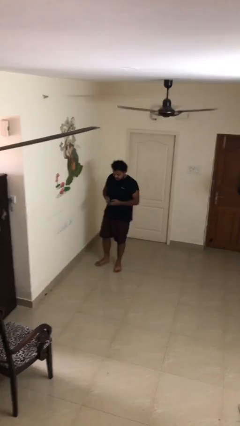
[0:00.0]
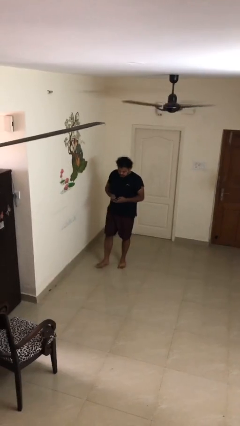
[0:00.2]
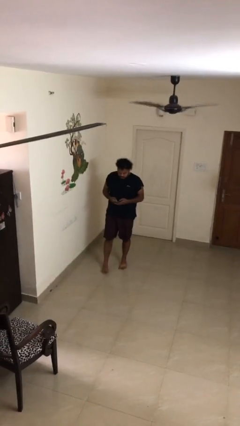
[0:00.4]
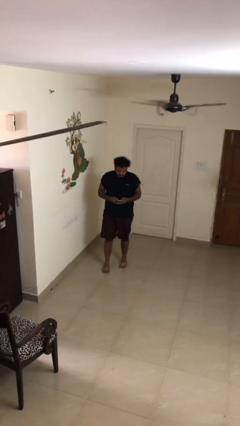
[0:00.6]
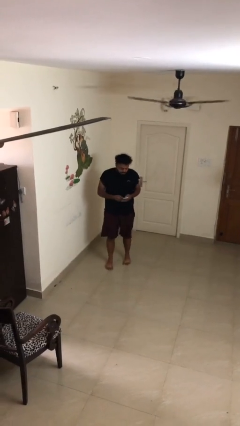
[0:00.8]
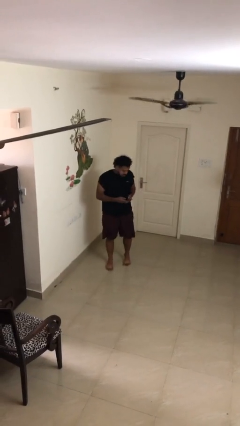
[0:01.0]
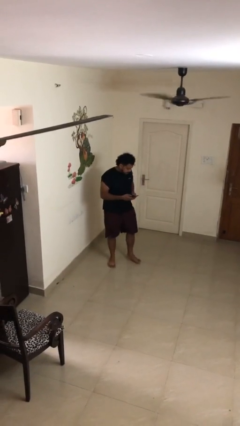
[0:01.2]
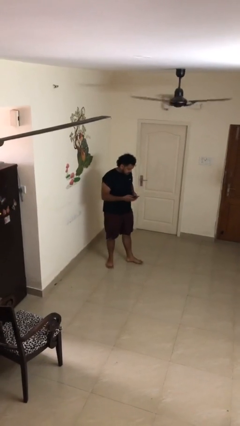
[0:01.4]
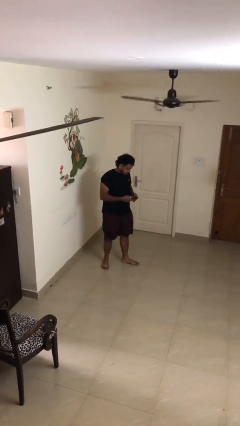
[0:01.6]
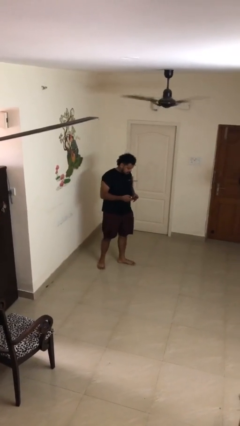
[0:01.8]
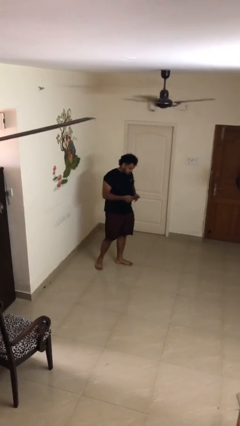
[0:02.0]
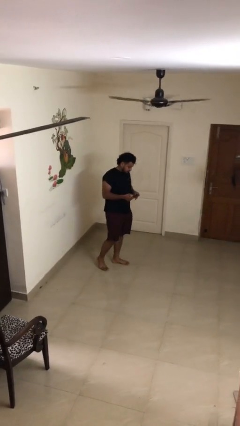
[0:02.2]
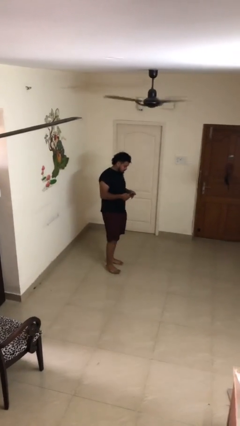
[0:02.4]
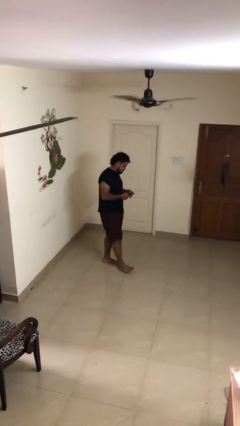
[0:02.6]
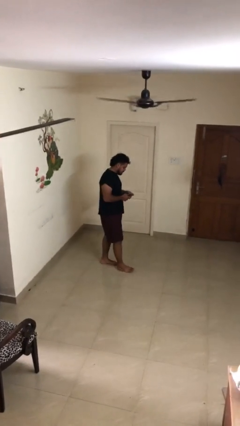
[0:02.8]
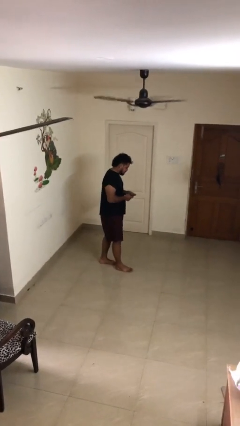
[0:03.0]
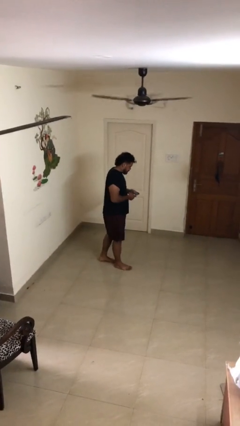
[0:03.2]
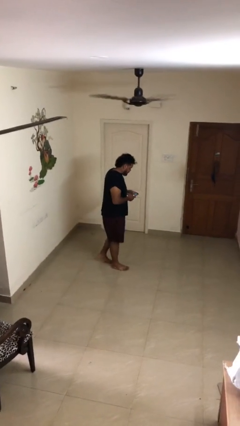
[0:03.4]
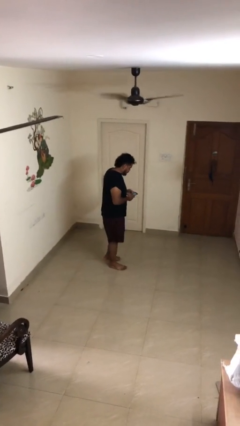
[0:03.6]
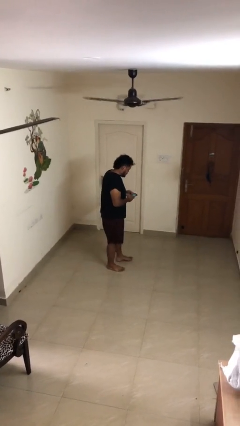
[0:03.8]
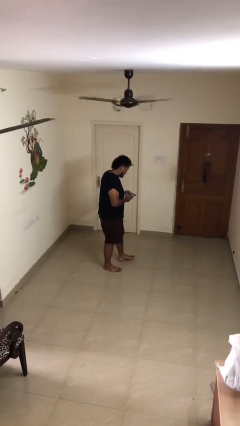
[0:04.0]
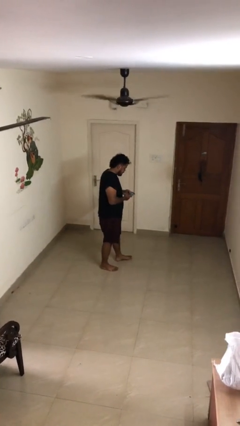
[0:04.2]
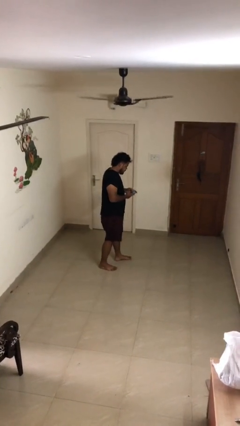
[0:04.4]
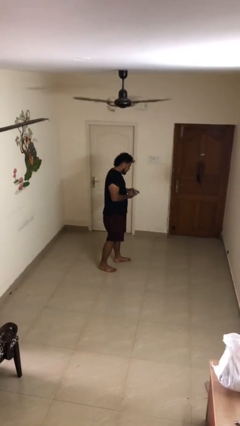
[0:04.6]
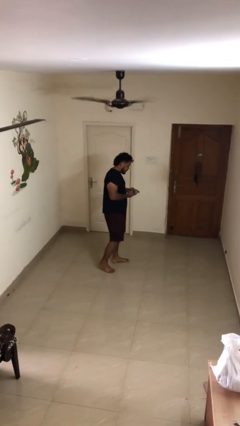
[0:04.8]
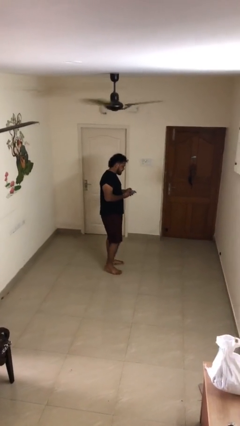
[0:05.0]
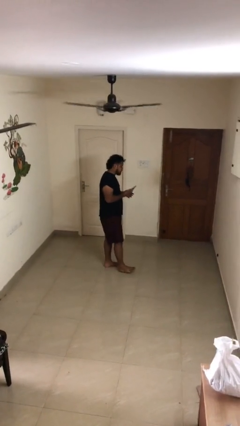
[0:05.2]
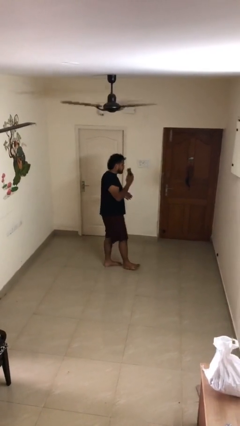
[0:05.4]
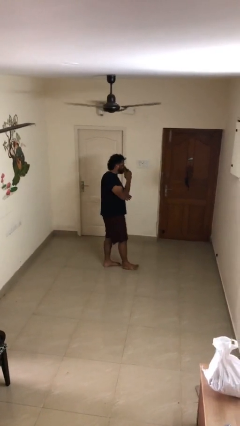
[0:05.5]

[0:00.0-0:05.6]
person texts on phone

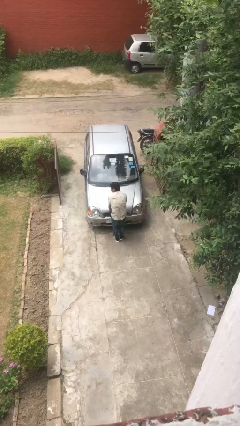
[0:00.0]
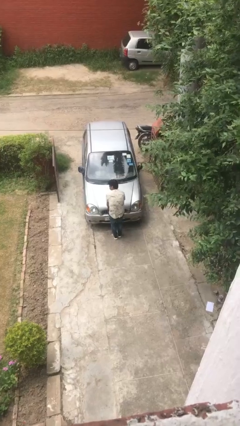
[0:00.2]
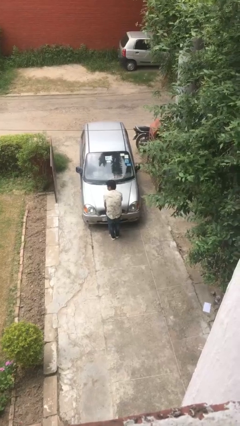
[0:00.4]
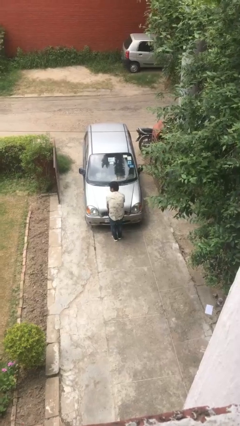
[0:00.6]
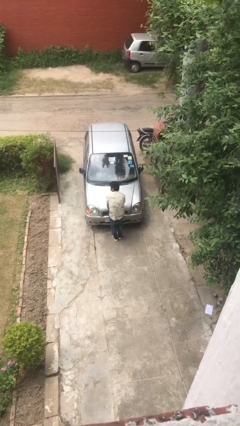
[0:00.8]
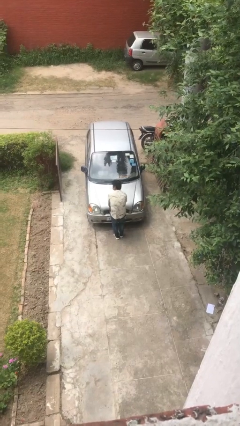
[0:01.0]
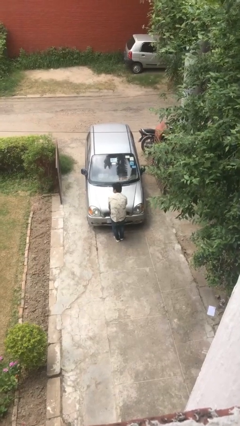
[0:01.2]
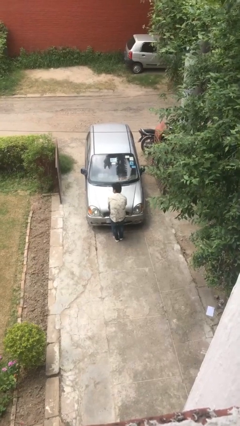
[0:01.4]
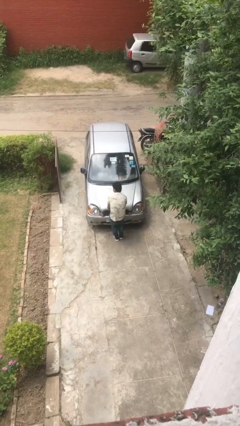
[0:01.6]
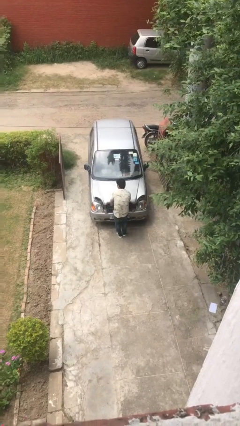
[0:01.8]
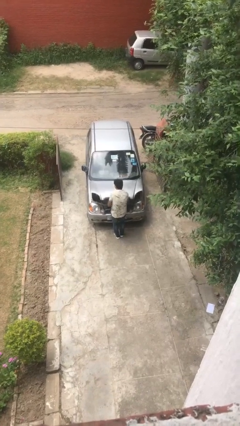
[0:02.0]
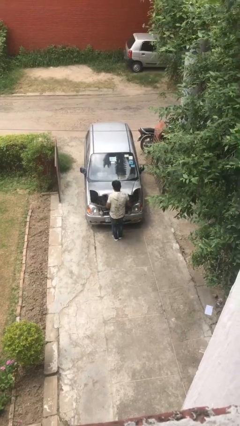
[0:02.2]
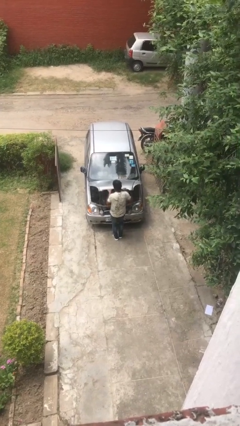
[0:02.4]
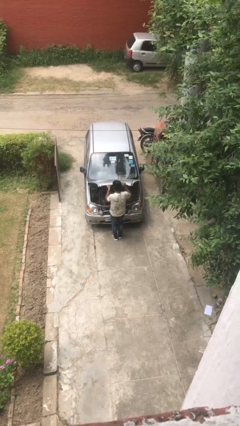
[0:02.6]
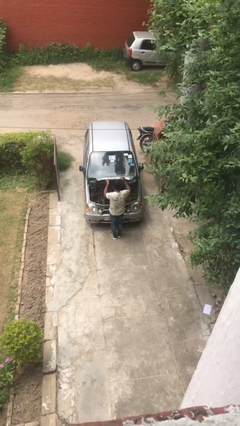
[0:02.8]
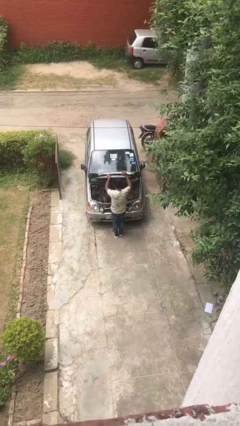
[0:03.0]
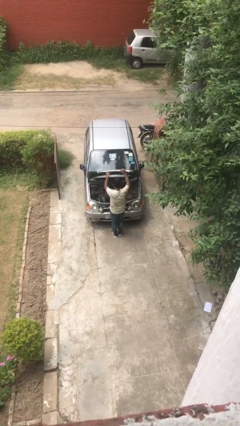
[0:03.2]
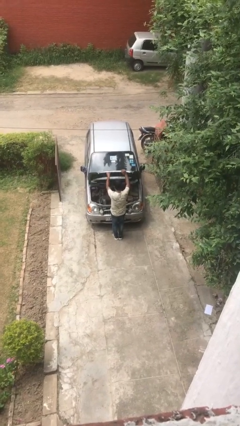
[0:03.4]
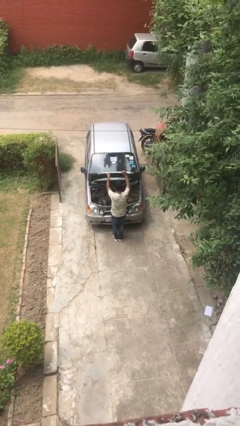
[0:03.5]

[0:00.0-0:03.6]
person opens car hood

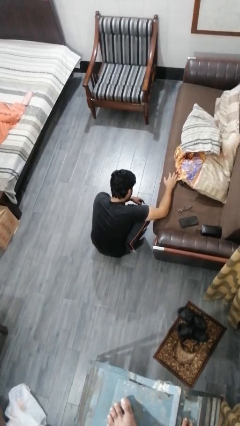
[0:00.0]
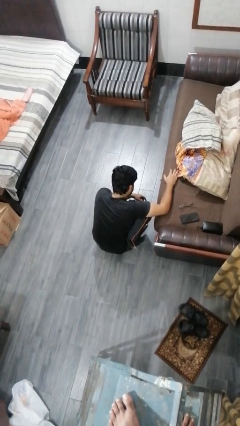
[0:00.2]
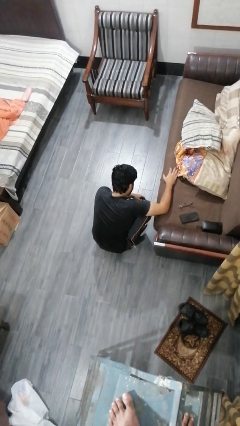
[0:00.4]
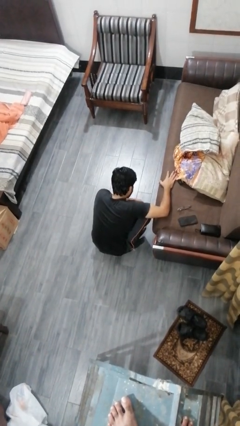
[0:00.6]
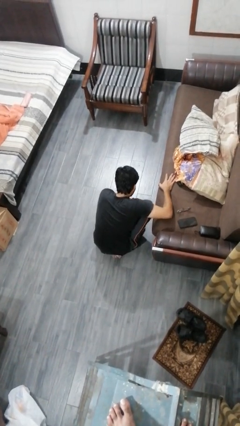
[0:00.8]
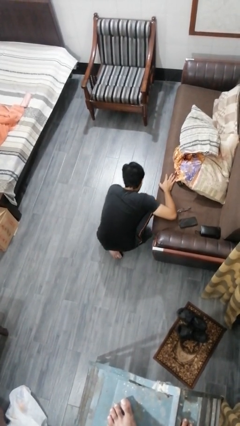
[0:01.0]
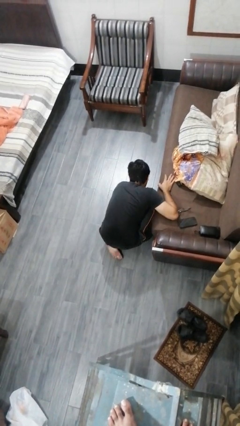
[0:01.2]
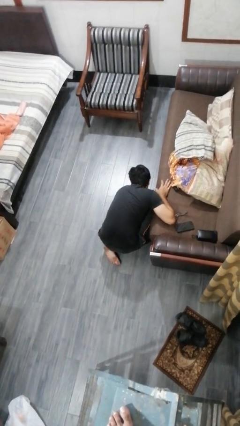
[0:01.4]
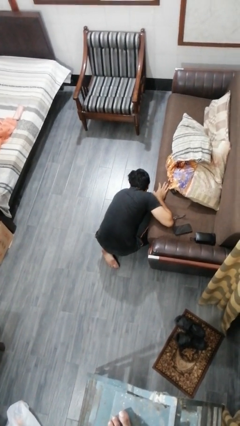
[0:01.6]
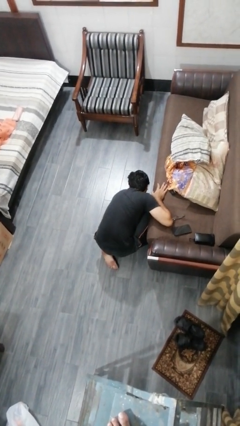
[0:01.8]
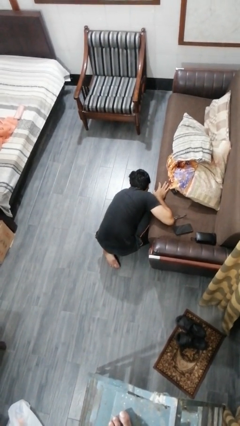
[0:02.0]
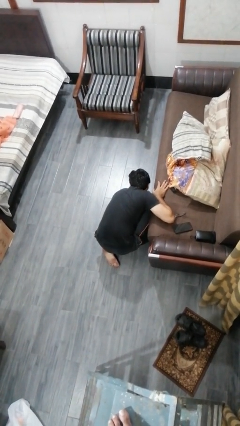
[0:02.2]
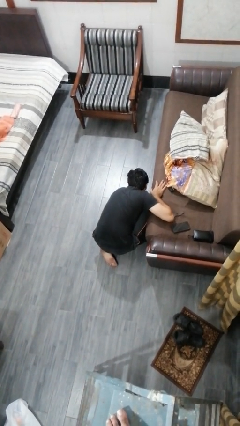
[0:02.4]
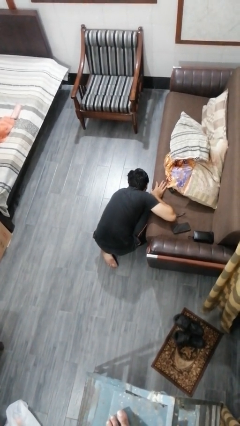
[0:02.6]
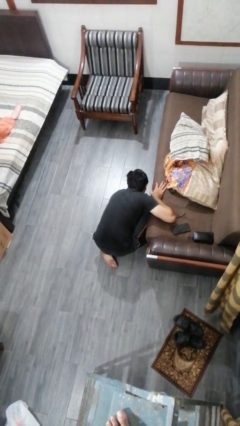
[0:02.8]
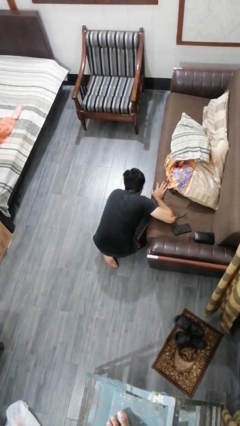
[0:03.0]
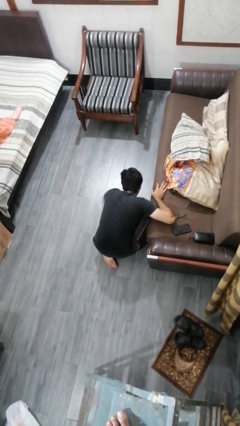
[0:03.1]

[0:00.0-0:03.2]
person searches under couch

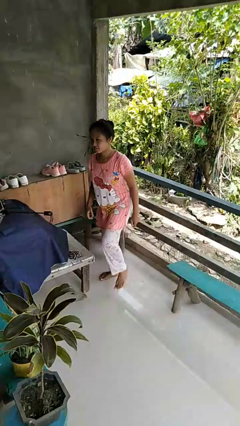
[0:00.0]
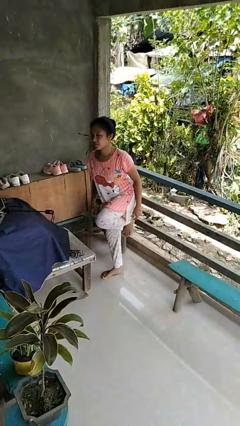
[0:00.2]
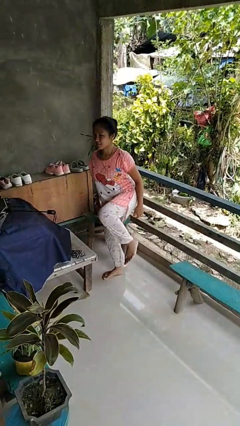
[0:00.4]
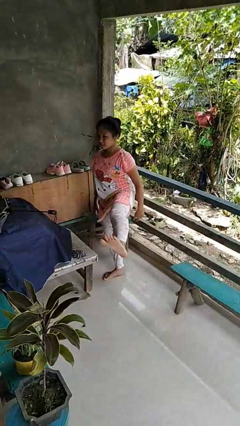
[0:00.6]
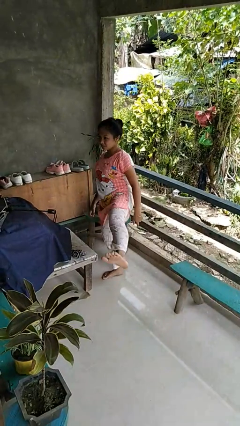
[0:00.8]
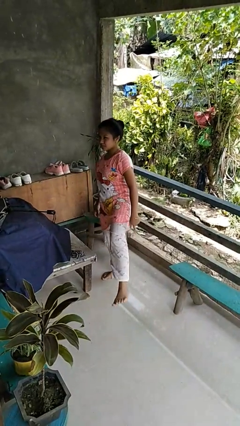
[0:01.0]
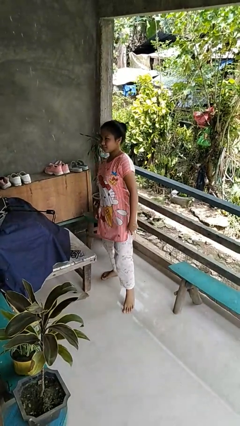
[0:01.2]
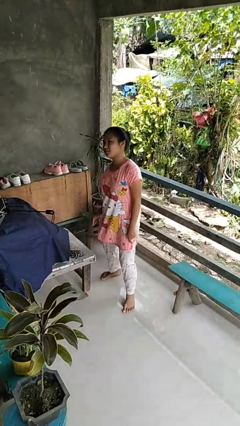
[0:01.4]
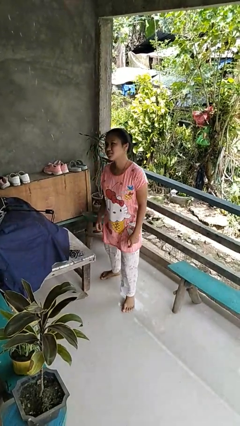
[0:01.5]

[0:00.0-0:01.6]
person karate kicks

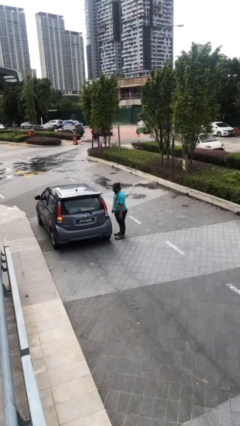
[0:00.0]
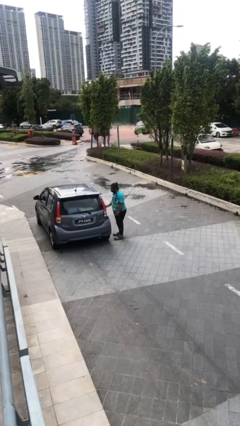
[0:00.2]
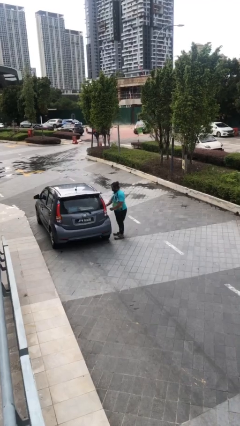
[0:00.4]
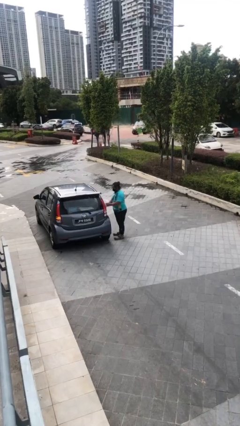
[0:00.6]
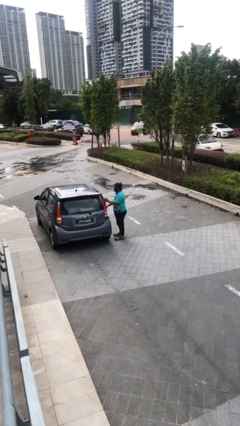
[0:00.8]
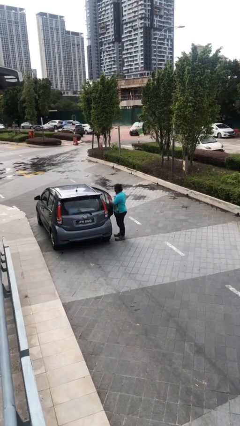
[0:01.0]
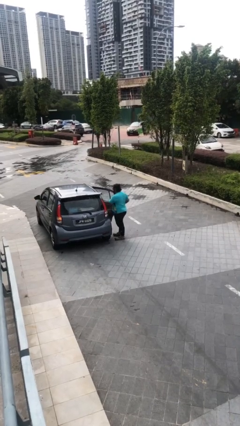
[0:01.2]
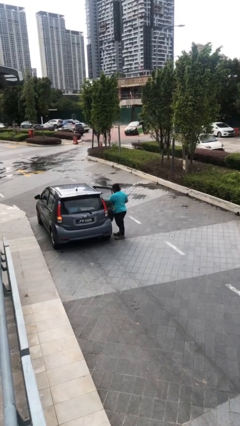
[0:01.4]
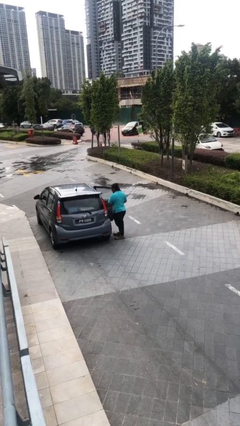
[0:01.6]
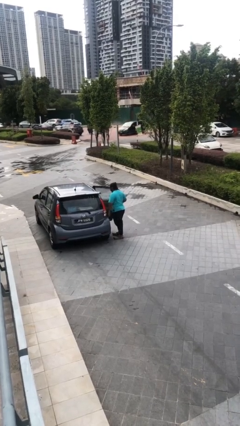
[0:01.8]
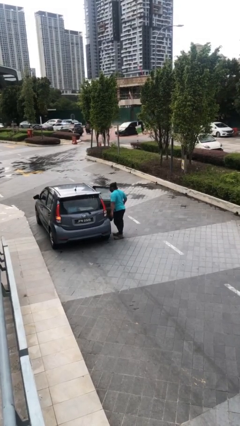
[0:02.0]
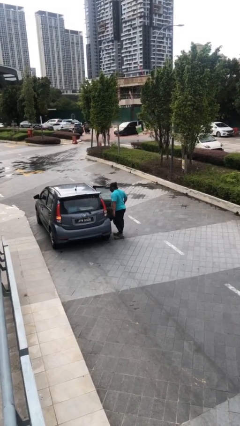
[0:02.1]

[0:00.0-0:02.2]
person opens car door

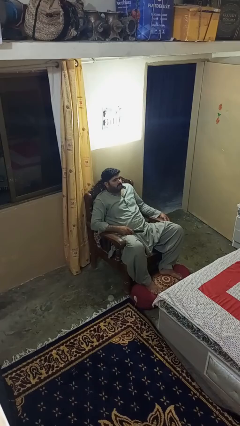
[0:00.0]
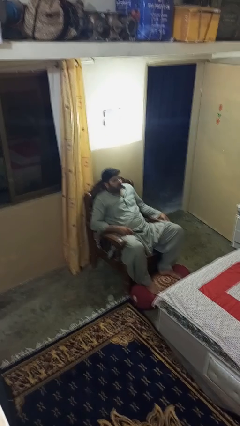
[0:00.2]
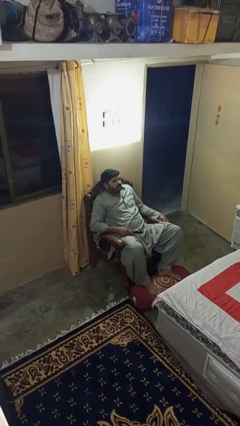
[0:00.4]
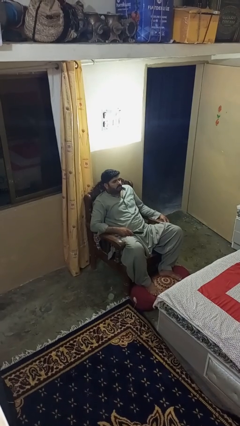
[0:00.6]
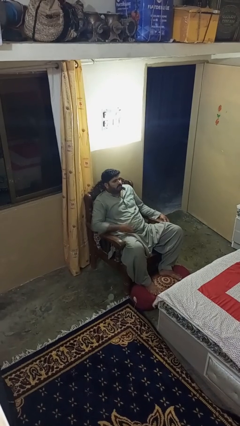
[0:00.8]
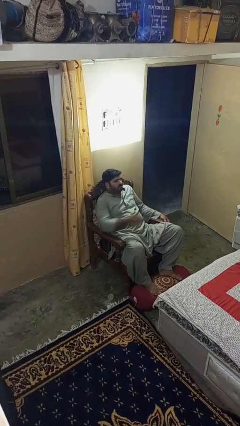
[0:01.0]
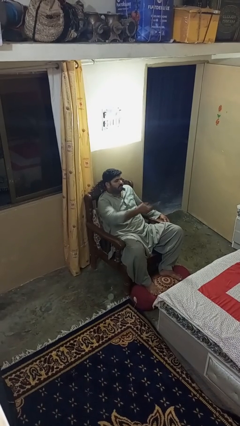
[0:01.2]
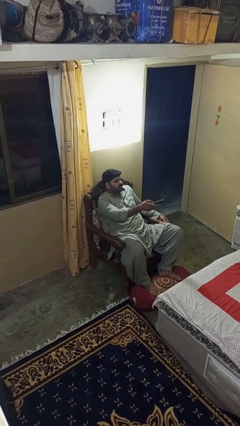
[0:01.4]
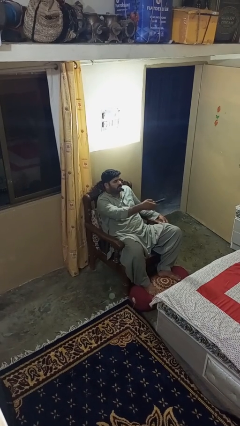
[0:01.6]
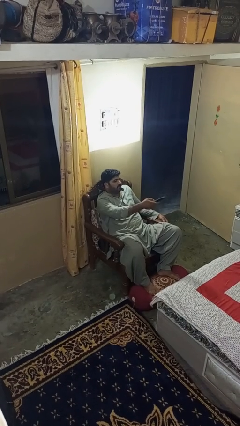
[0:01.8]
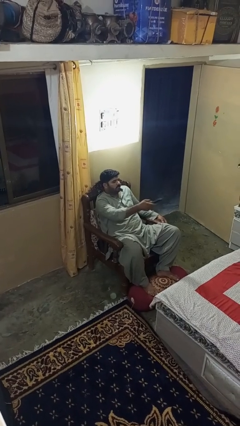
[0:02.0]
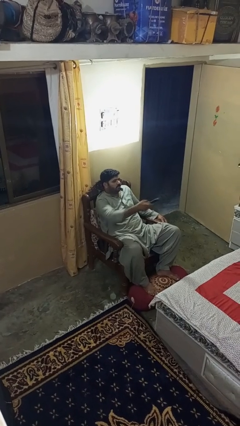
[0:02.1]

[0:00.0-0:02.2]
person uses television remote
